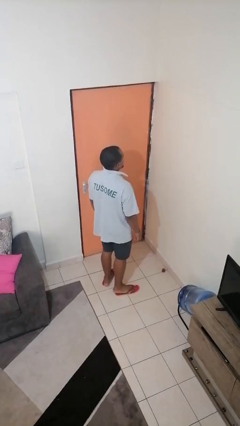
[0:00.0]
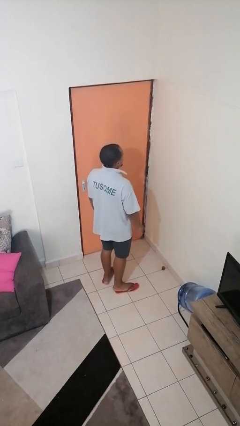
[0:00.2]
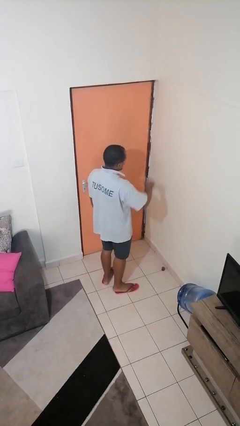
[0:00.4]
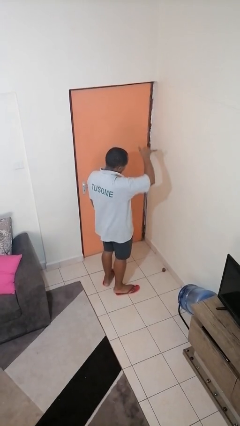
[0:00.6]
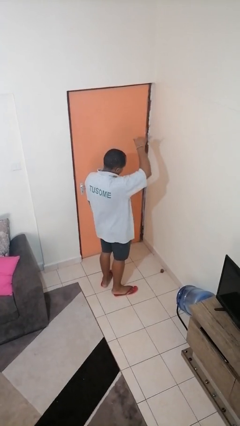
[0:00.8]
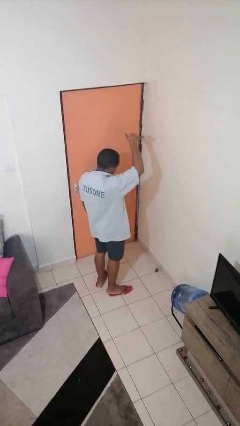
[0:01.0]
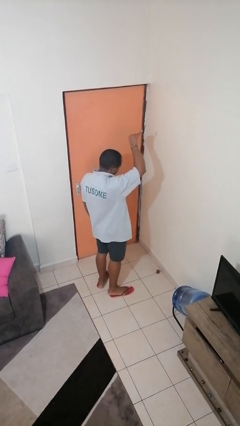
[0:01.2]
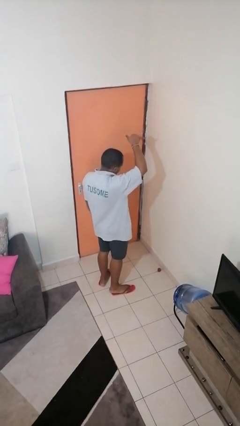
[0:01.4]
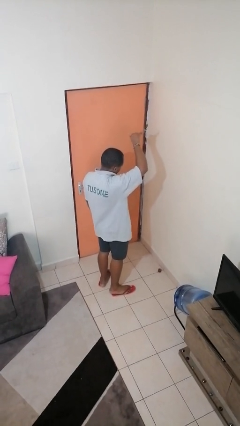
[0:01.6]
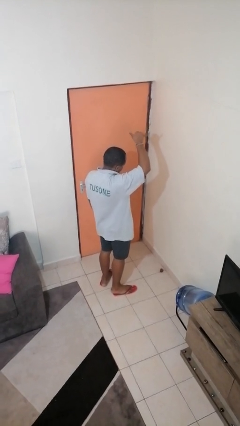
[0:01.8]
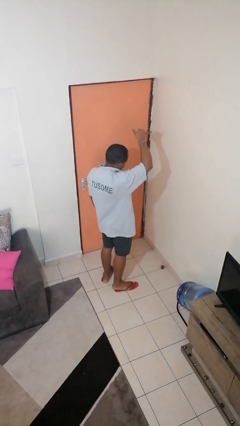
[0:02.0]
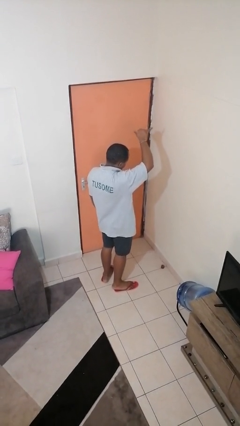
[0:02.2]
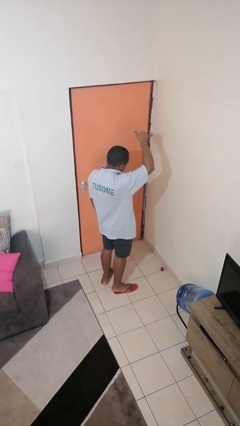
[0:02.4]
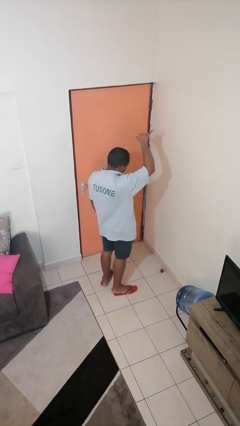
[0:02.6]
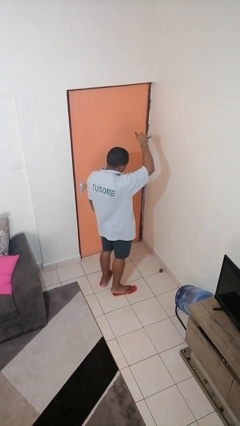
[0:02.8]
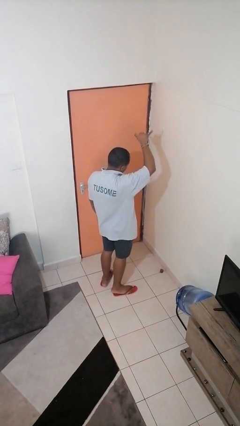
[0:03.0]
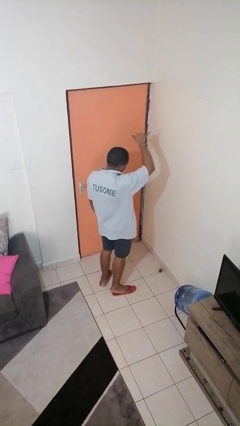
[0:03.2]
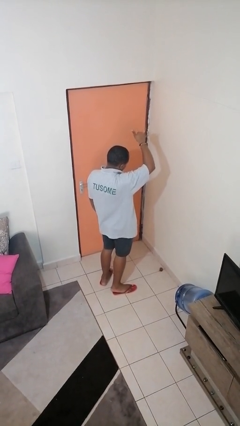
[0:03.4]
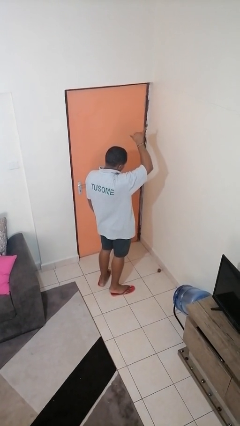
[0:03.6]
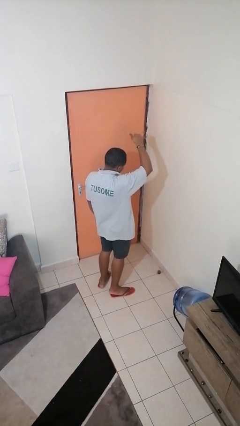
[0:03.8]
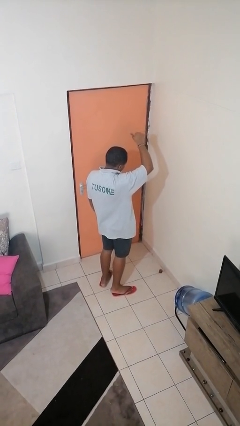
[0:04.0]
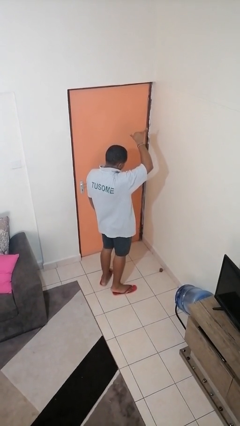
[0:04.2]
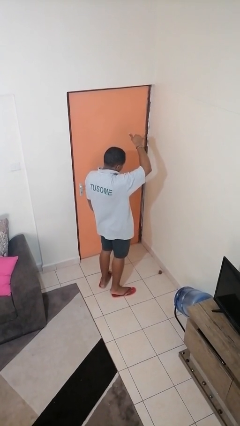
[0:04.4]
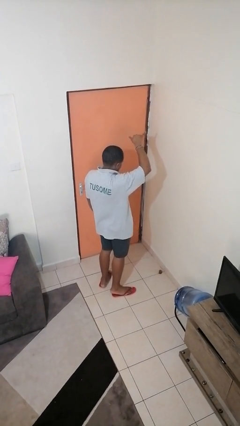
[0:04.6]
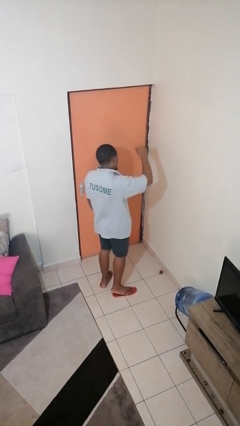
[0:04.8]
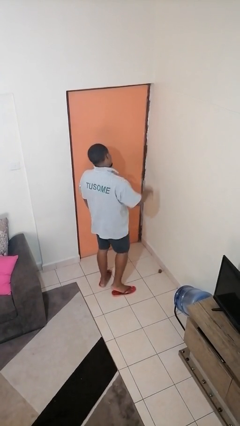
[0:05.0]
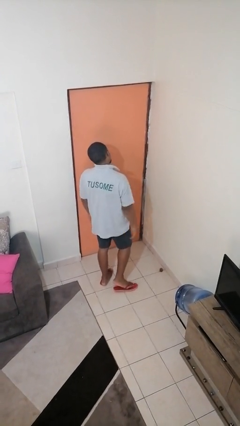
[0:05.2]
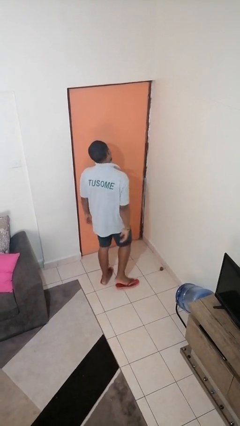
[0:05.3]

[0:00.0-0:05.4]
person gestures hang loose

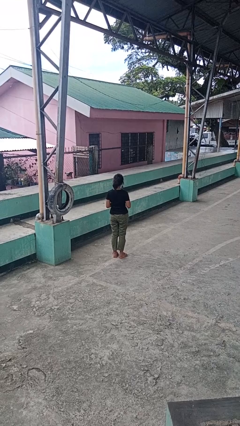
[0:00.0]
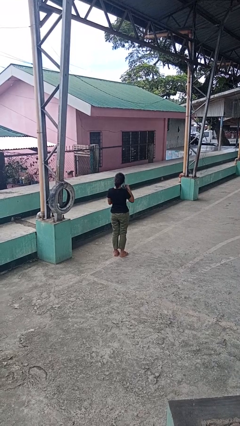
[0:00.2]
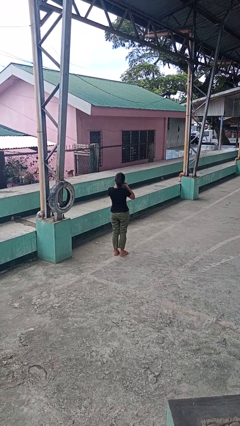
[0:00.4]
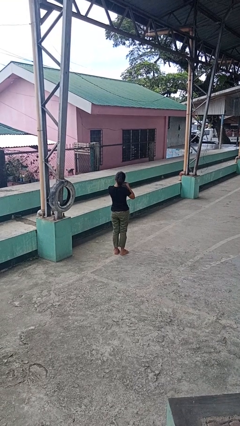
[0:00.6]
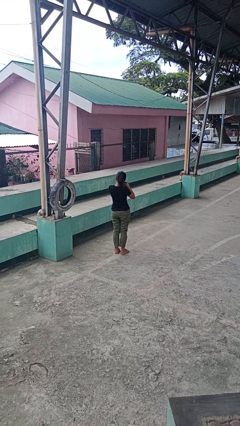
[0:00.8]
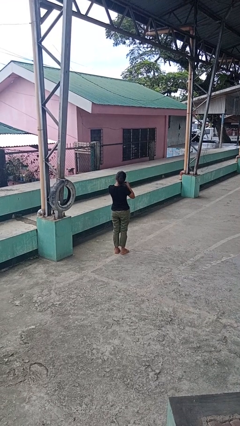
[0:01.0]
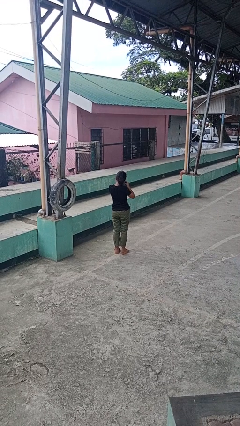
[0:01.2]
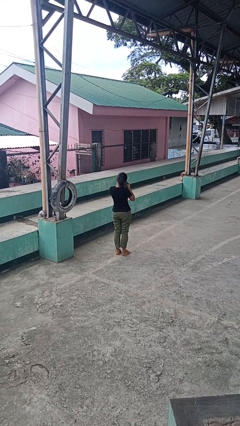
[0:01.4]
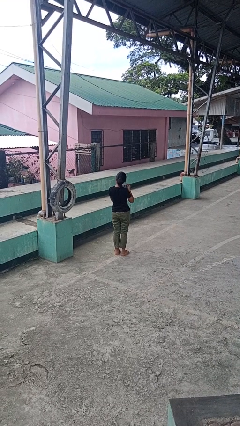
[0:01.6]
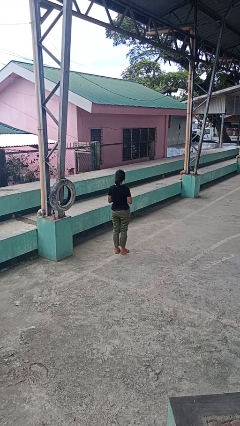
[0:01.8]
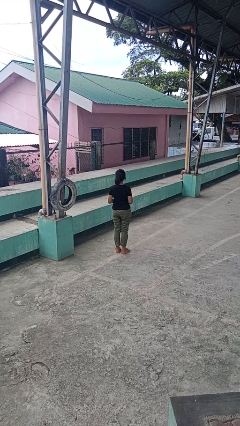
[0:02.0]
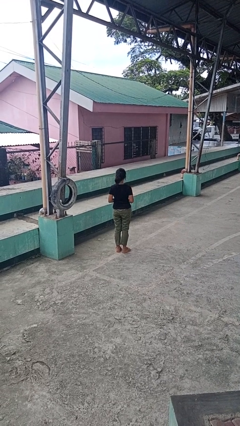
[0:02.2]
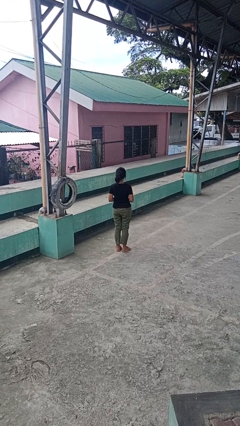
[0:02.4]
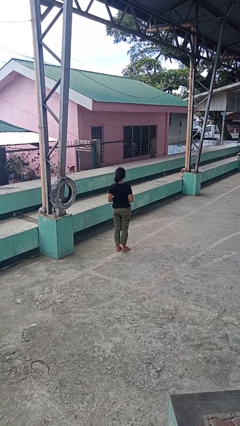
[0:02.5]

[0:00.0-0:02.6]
person takes off earrings

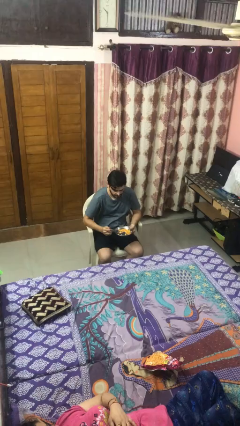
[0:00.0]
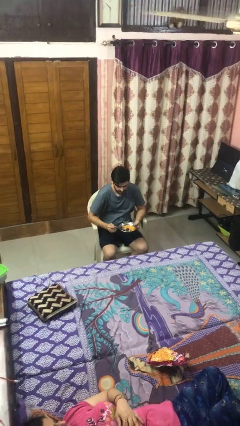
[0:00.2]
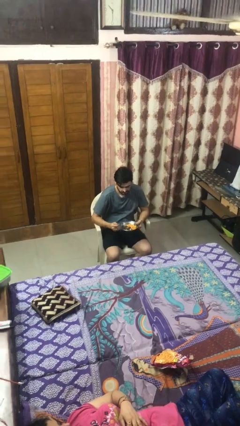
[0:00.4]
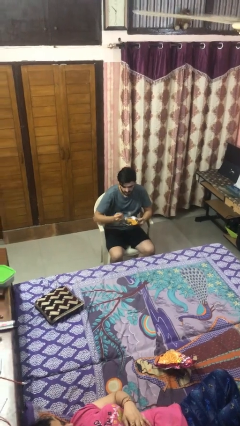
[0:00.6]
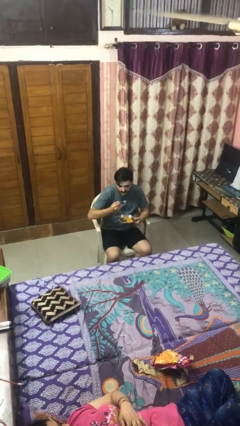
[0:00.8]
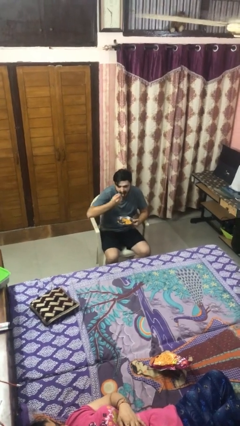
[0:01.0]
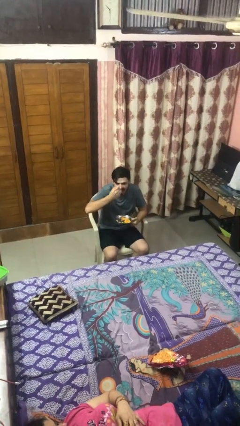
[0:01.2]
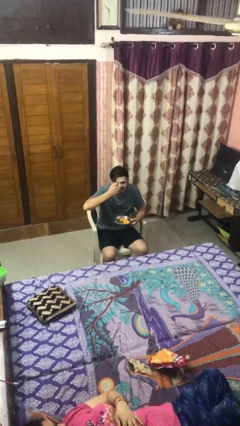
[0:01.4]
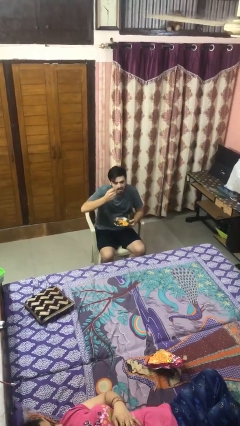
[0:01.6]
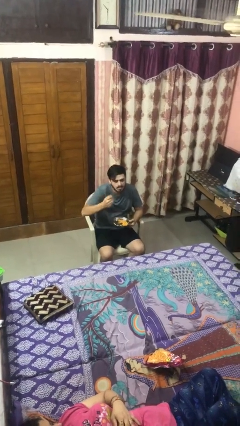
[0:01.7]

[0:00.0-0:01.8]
person eats with utensil

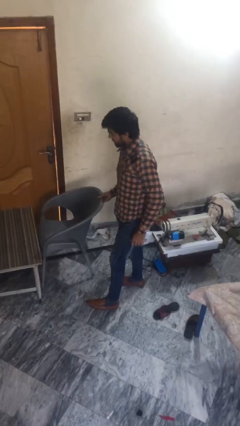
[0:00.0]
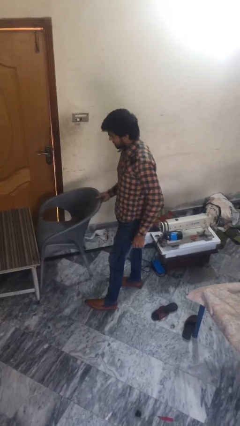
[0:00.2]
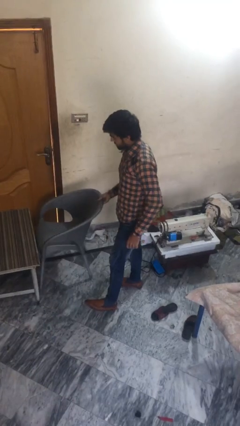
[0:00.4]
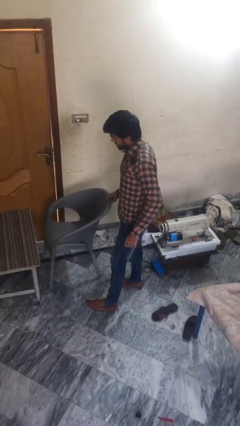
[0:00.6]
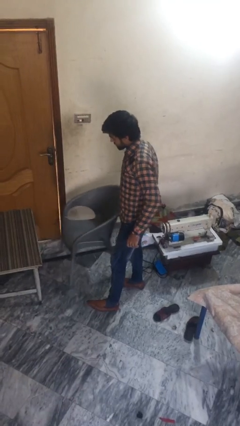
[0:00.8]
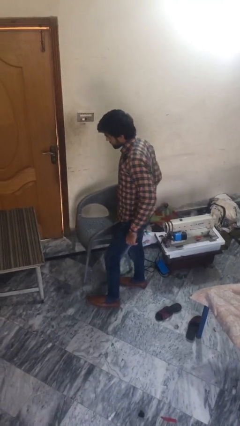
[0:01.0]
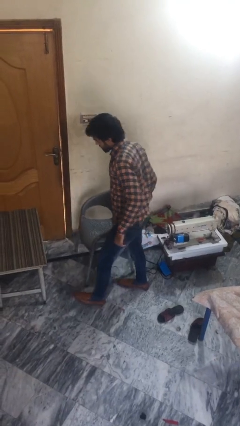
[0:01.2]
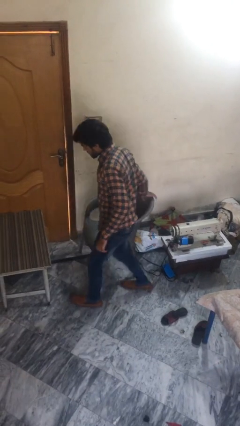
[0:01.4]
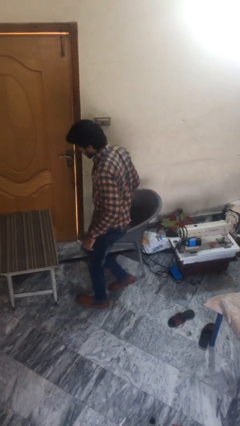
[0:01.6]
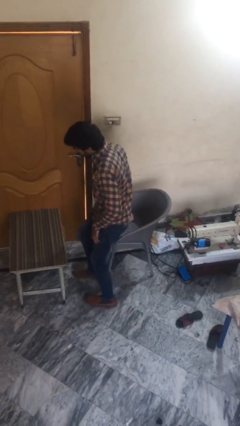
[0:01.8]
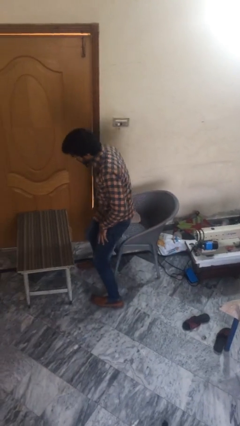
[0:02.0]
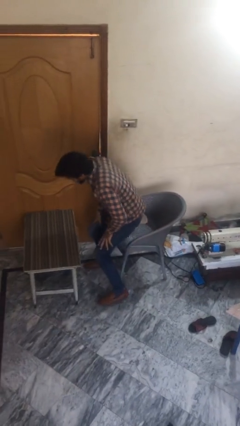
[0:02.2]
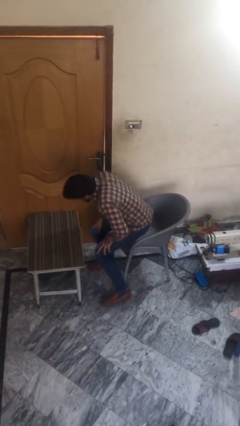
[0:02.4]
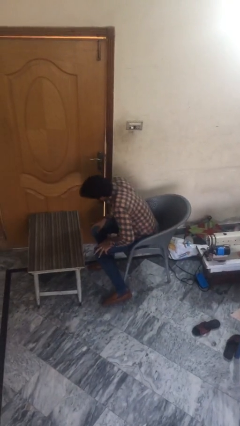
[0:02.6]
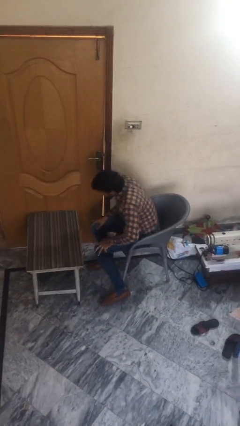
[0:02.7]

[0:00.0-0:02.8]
person sits down

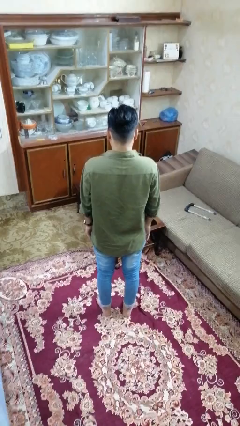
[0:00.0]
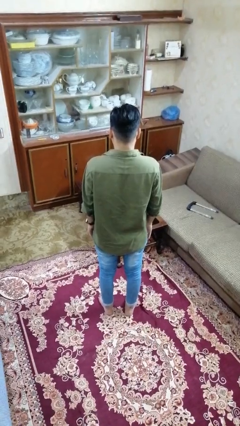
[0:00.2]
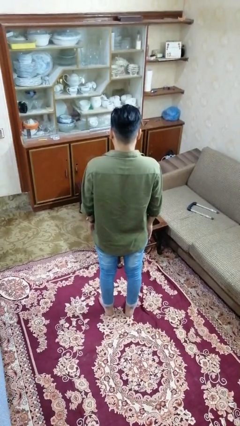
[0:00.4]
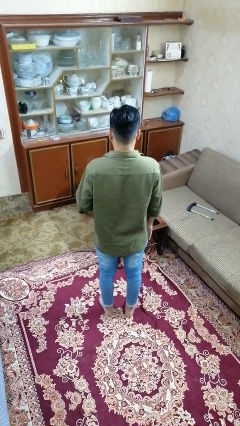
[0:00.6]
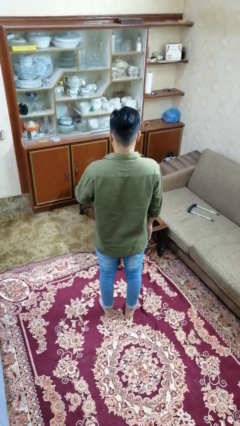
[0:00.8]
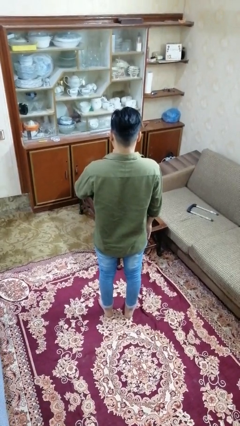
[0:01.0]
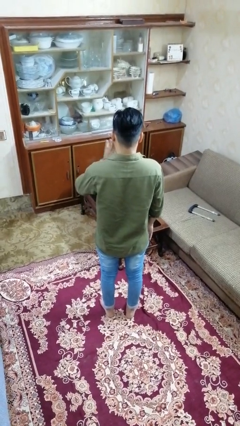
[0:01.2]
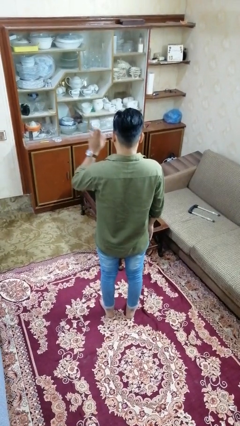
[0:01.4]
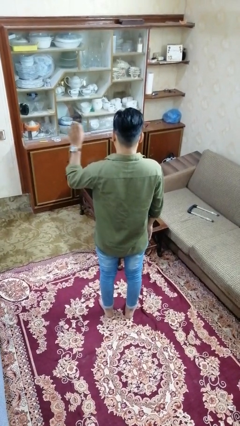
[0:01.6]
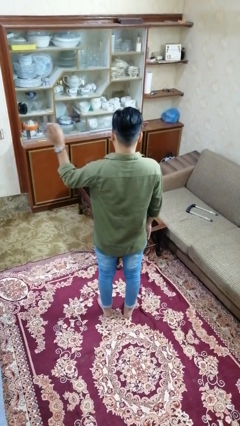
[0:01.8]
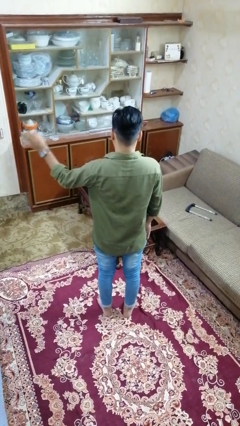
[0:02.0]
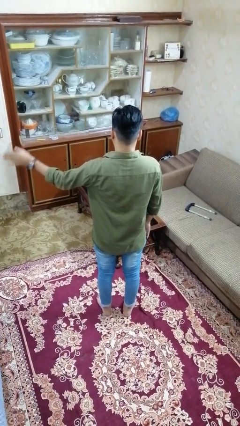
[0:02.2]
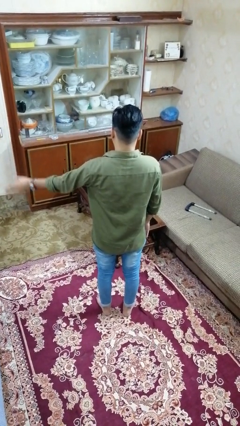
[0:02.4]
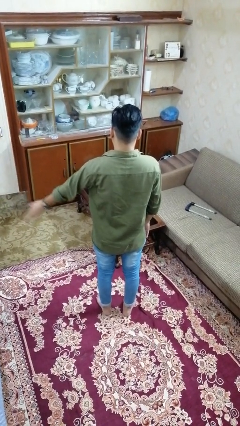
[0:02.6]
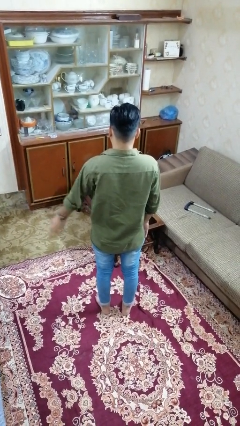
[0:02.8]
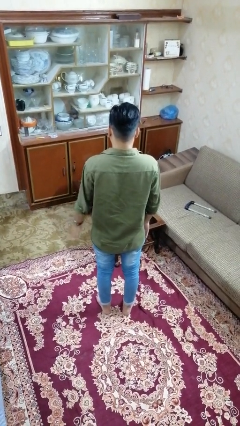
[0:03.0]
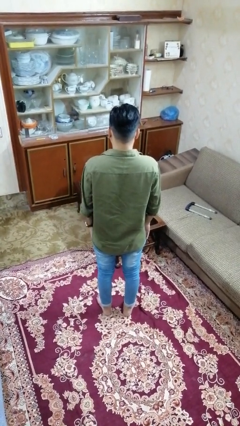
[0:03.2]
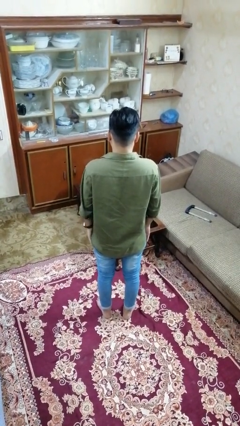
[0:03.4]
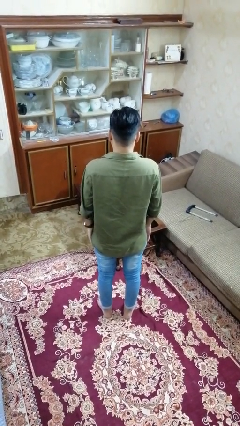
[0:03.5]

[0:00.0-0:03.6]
person gestures swipe left

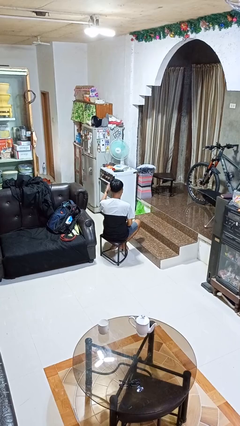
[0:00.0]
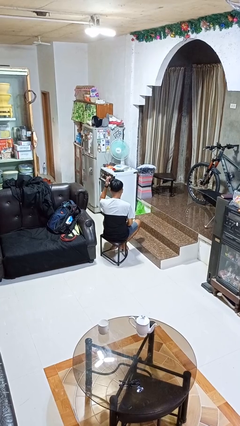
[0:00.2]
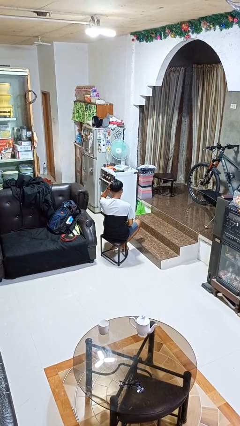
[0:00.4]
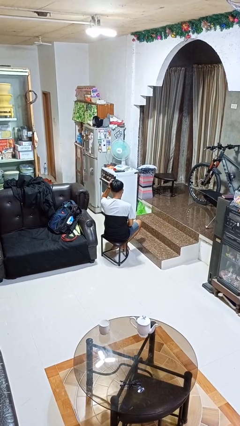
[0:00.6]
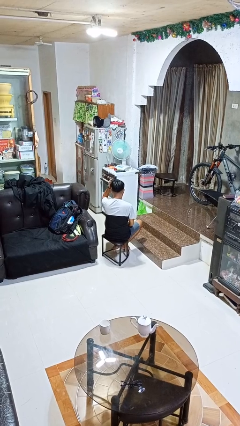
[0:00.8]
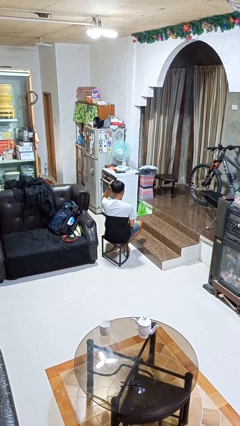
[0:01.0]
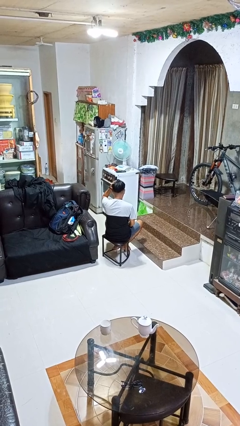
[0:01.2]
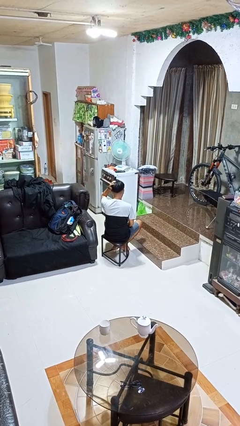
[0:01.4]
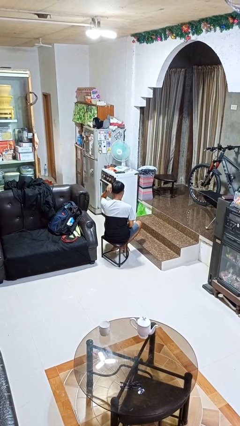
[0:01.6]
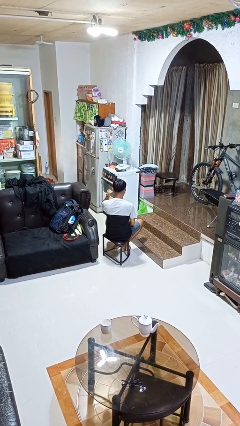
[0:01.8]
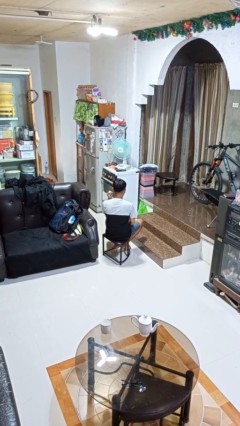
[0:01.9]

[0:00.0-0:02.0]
person pats head
